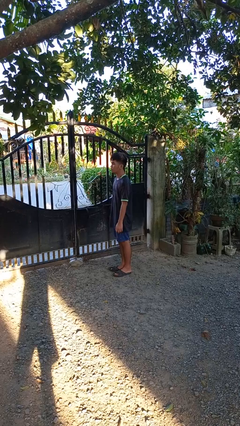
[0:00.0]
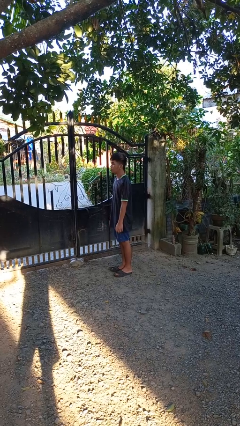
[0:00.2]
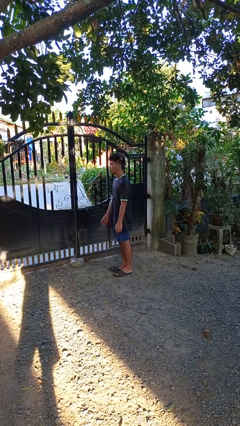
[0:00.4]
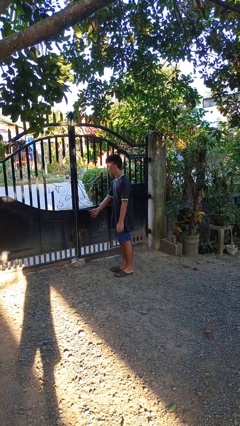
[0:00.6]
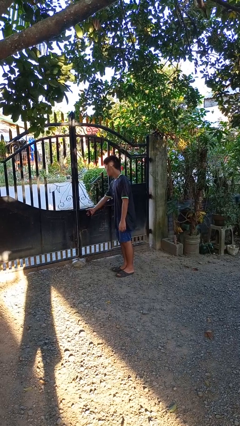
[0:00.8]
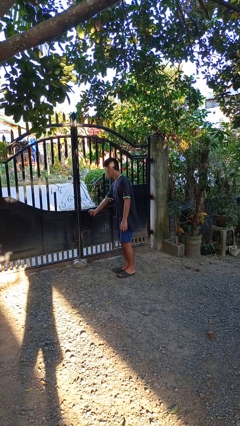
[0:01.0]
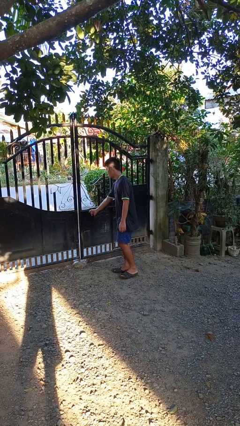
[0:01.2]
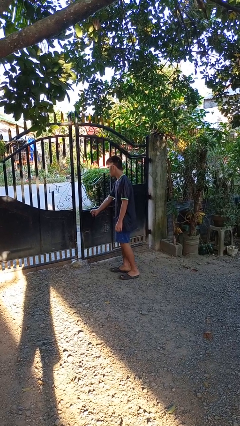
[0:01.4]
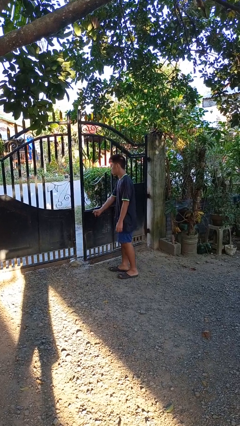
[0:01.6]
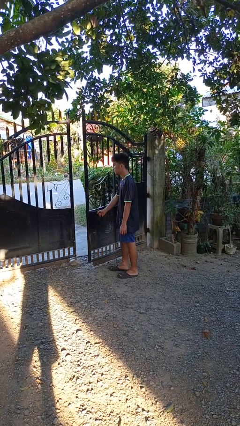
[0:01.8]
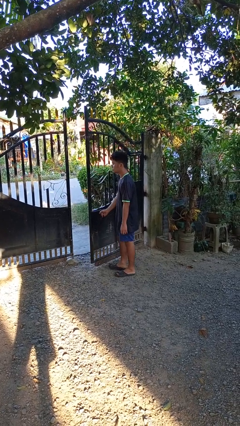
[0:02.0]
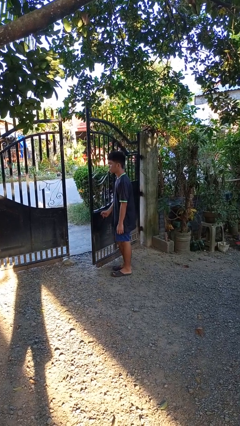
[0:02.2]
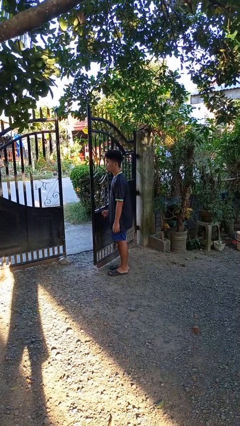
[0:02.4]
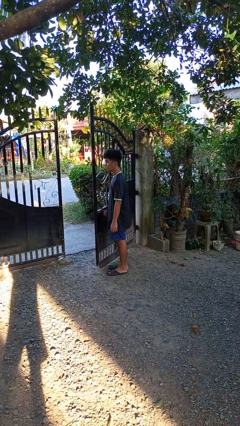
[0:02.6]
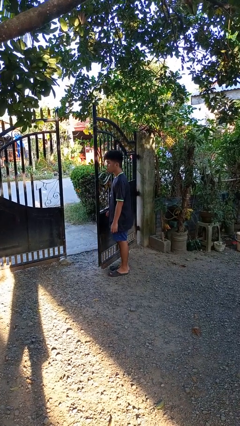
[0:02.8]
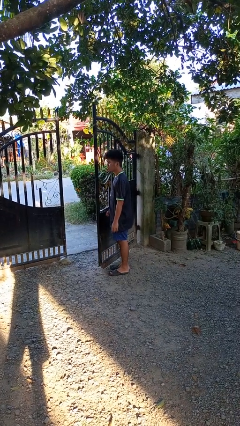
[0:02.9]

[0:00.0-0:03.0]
person opens gate

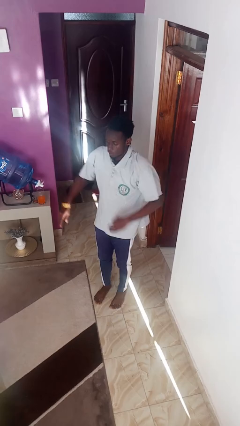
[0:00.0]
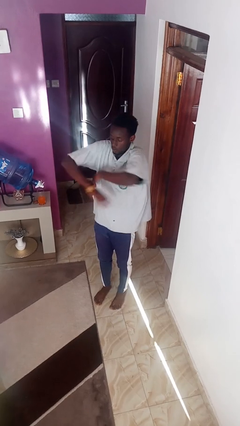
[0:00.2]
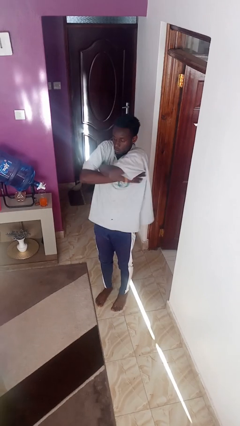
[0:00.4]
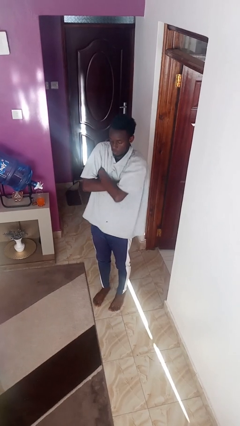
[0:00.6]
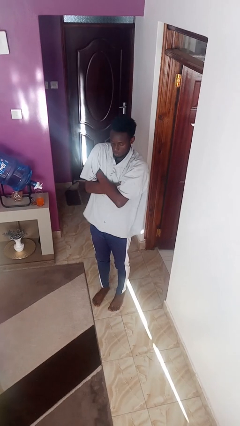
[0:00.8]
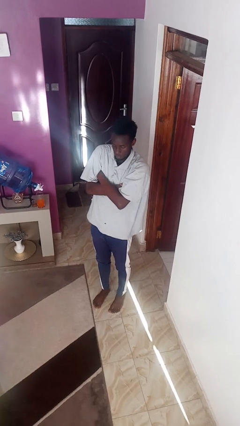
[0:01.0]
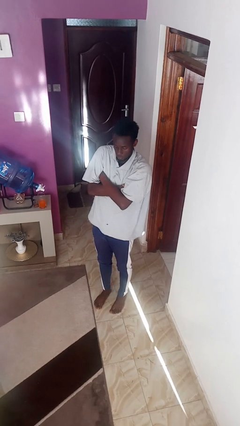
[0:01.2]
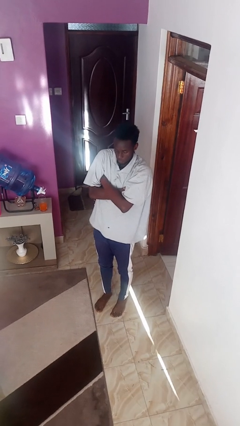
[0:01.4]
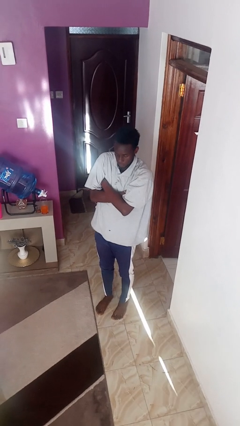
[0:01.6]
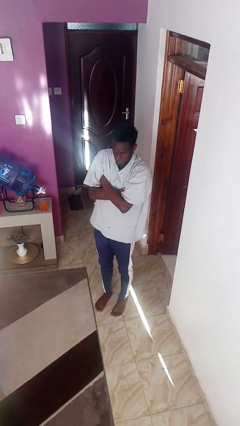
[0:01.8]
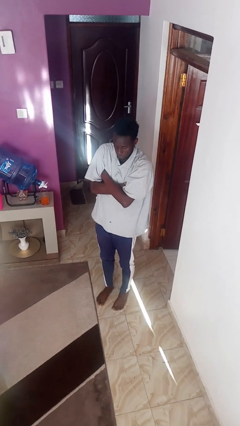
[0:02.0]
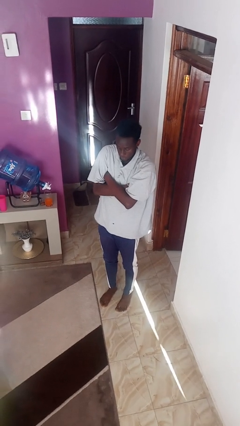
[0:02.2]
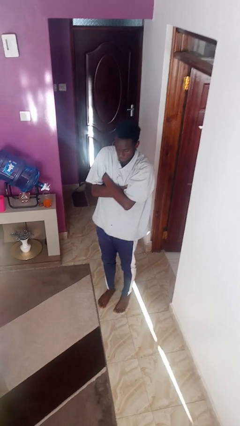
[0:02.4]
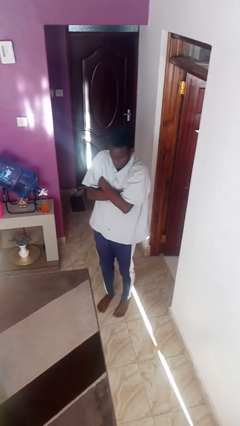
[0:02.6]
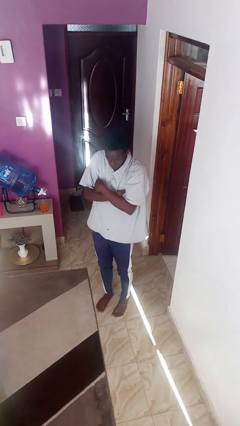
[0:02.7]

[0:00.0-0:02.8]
person crosses arms

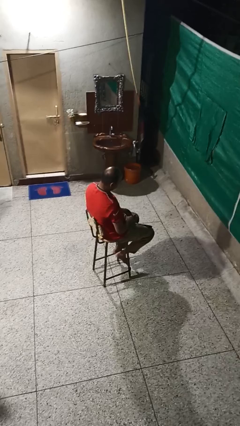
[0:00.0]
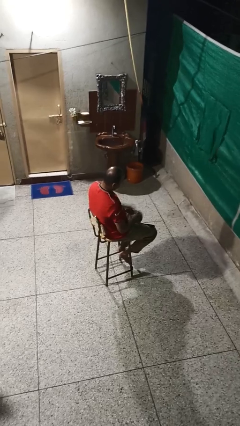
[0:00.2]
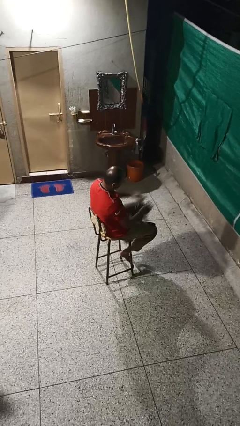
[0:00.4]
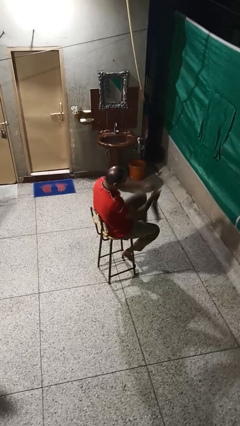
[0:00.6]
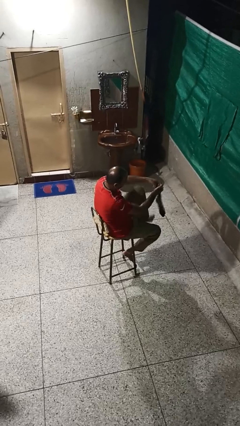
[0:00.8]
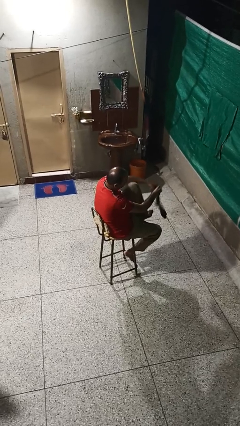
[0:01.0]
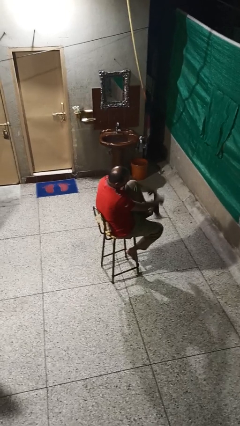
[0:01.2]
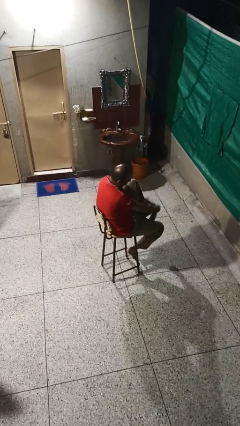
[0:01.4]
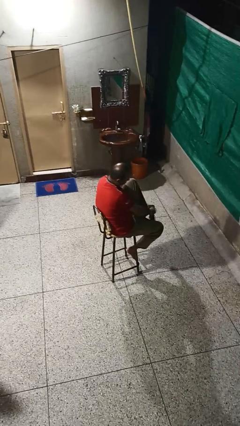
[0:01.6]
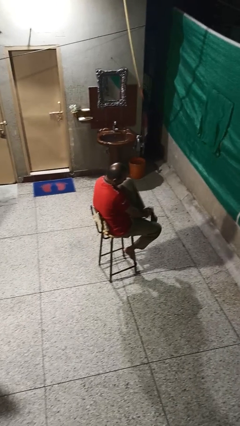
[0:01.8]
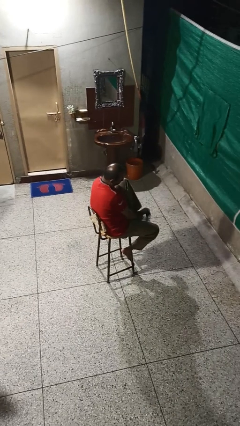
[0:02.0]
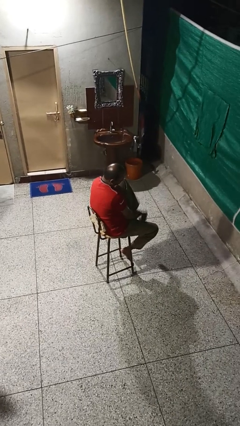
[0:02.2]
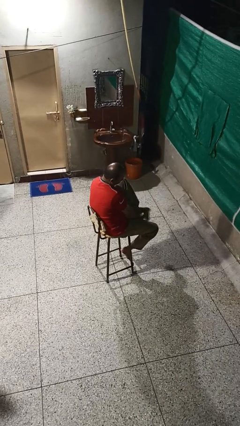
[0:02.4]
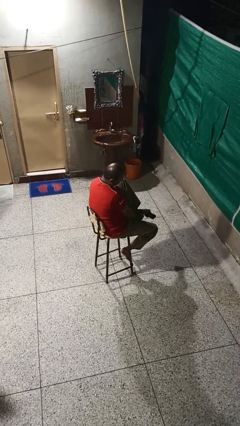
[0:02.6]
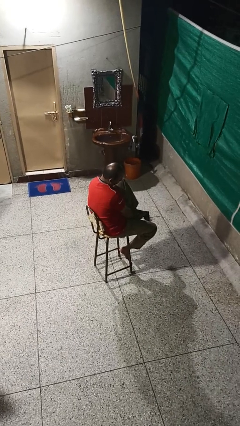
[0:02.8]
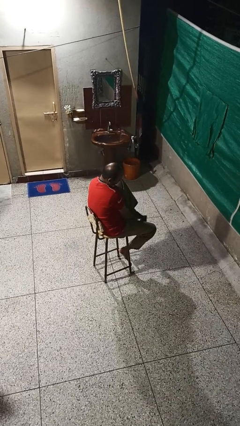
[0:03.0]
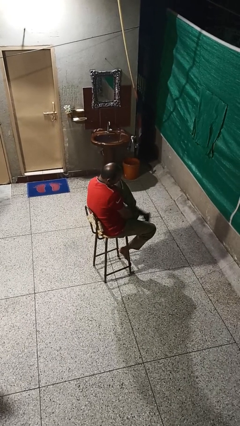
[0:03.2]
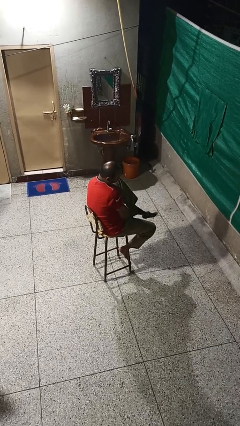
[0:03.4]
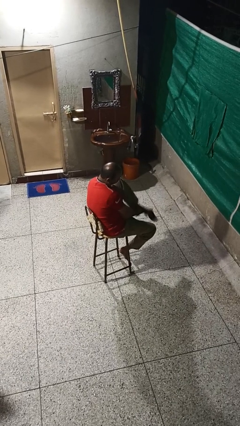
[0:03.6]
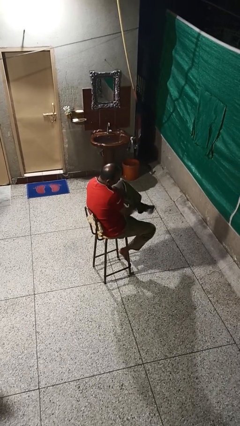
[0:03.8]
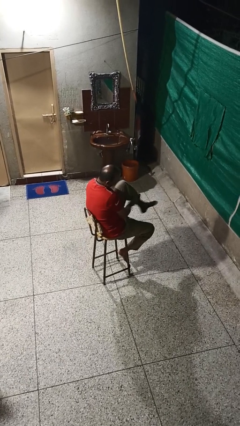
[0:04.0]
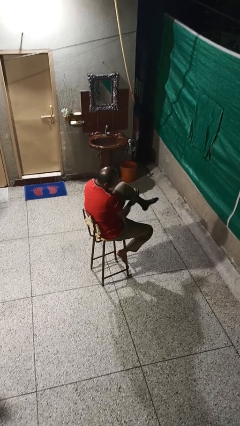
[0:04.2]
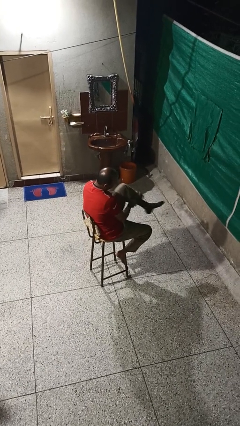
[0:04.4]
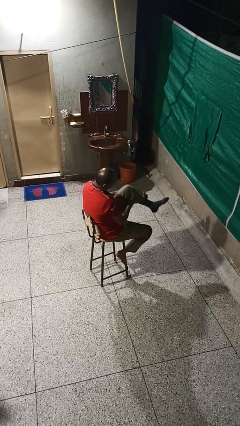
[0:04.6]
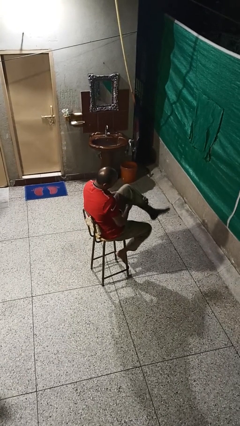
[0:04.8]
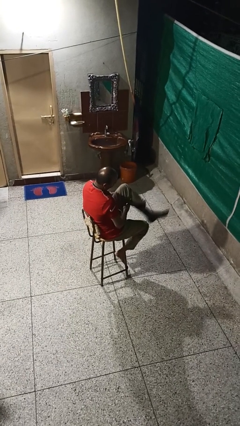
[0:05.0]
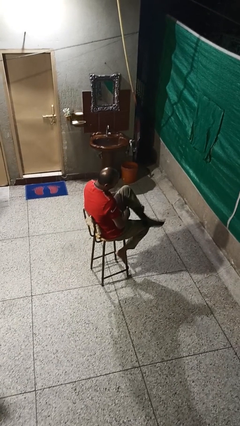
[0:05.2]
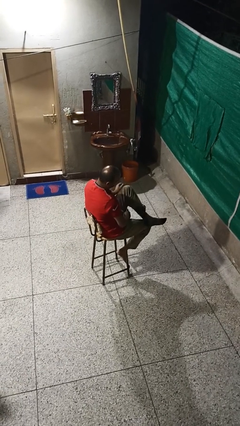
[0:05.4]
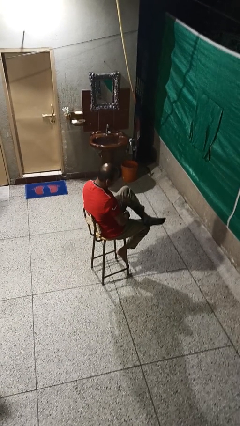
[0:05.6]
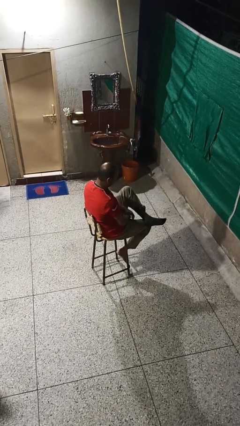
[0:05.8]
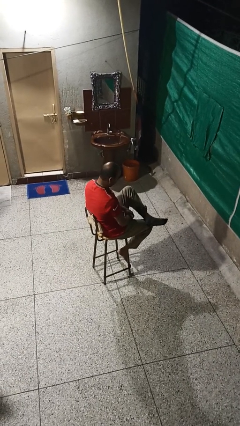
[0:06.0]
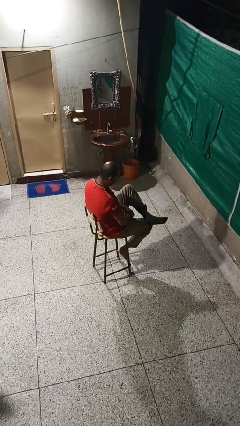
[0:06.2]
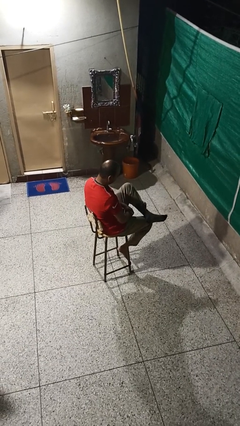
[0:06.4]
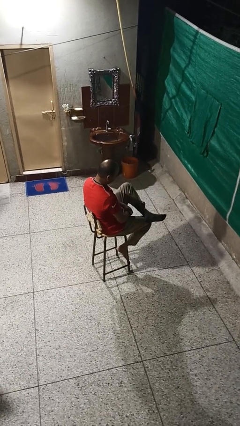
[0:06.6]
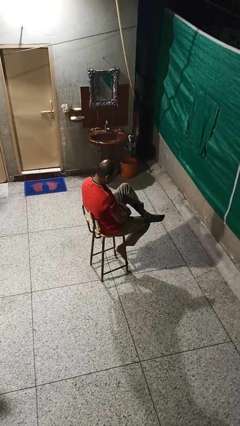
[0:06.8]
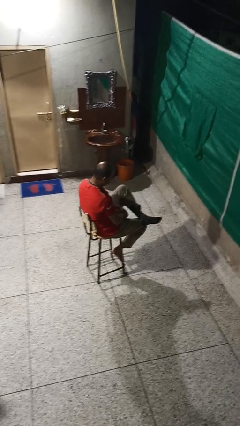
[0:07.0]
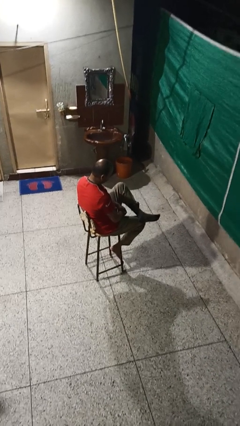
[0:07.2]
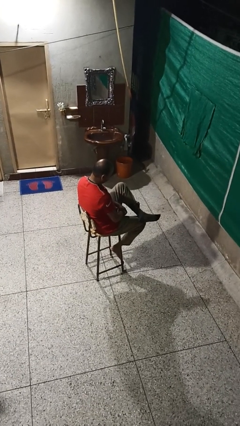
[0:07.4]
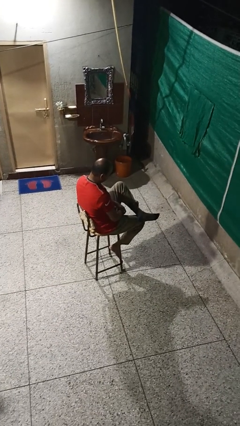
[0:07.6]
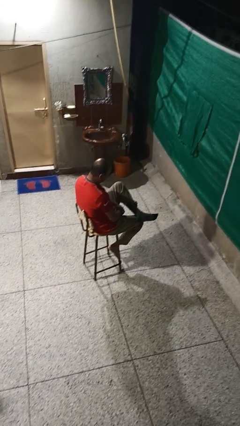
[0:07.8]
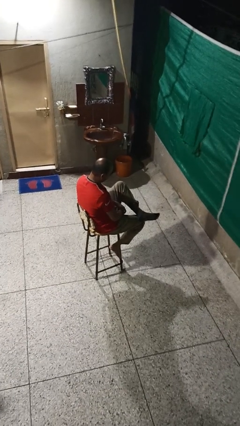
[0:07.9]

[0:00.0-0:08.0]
person puts on socks

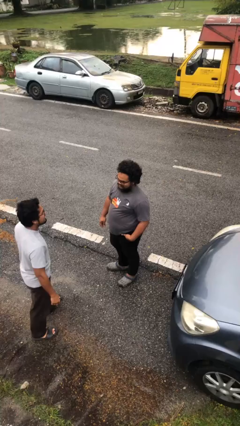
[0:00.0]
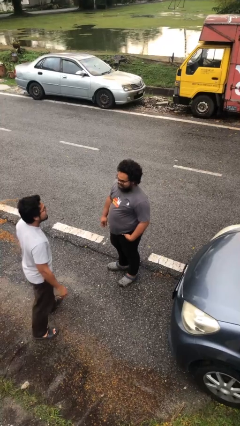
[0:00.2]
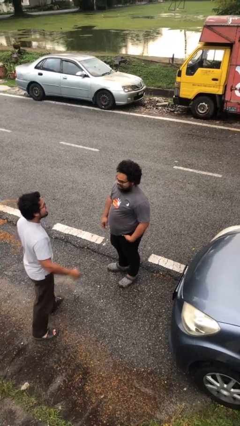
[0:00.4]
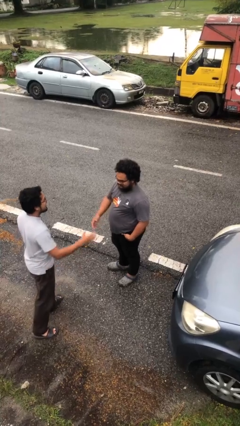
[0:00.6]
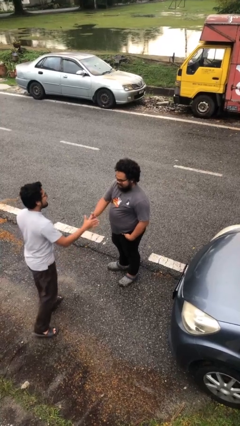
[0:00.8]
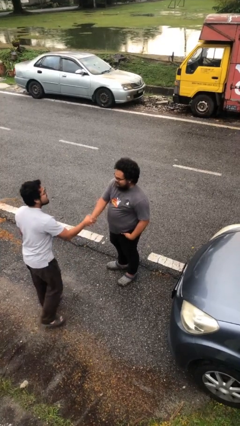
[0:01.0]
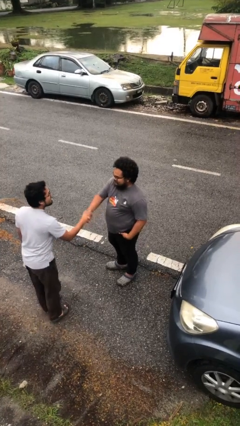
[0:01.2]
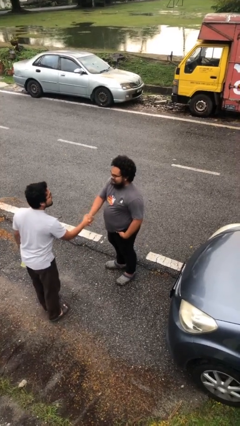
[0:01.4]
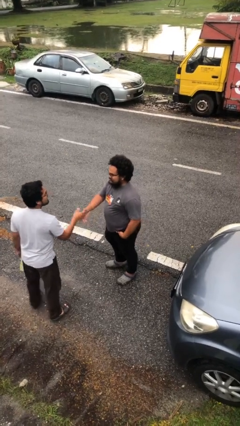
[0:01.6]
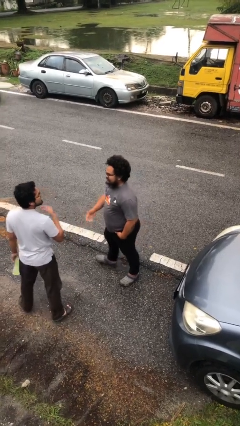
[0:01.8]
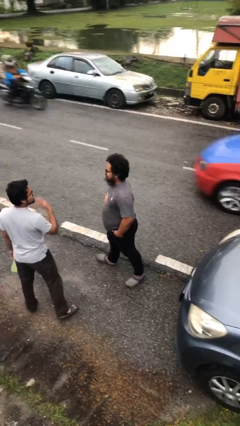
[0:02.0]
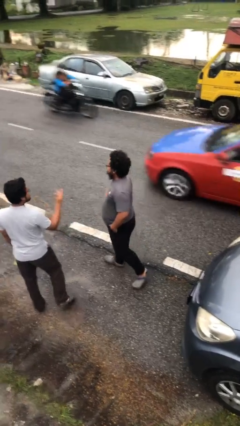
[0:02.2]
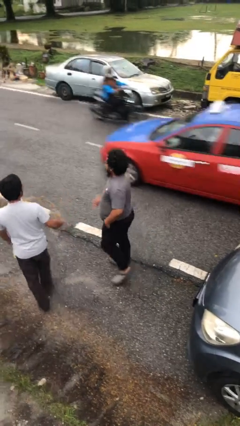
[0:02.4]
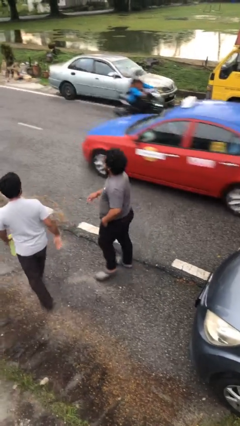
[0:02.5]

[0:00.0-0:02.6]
person shakes hand

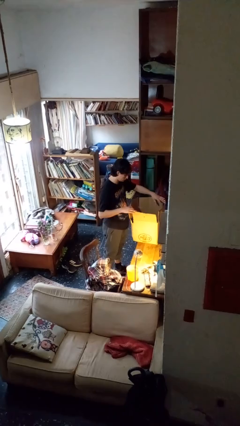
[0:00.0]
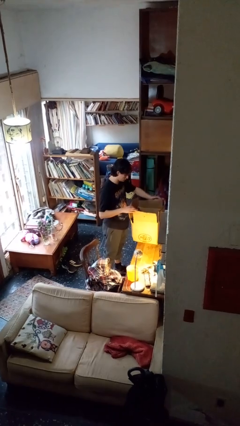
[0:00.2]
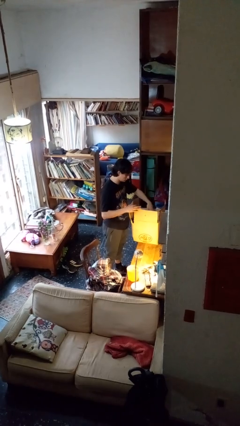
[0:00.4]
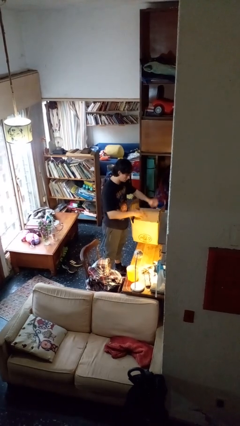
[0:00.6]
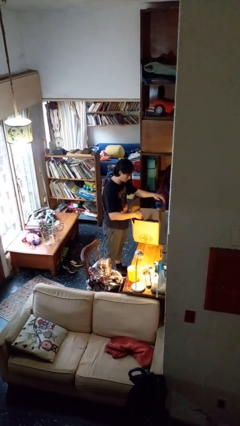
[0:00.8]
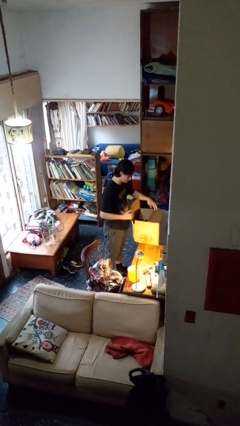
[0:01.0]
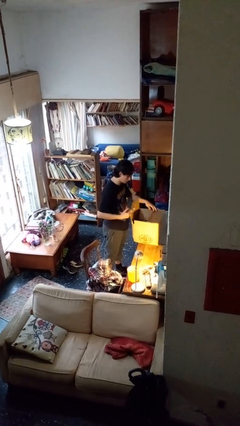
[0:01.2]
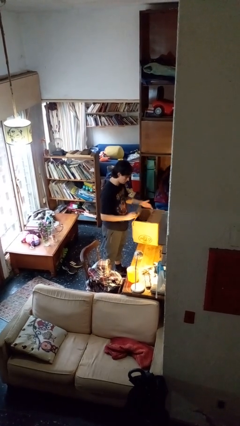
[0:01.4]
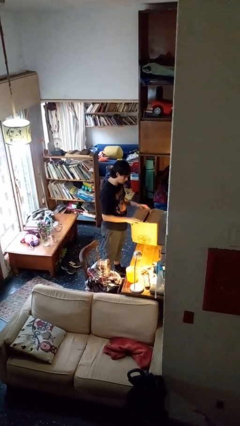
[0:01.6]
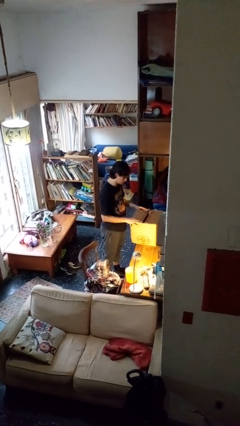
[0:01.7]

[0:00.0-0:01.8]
person closes box
